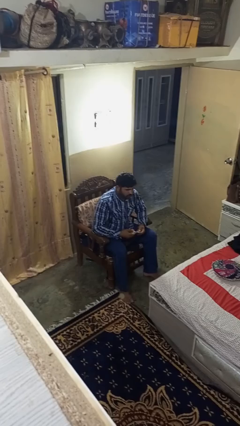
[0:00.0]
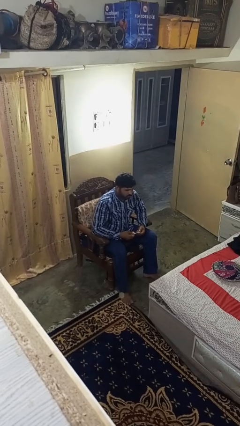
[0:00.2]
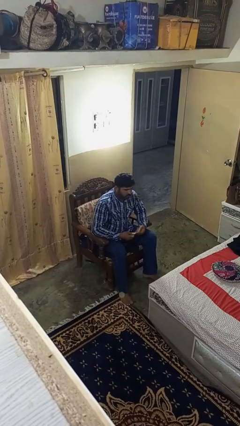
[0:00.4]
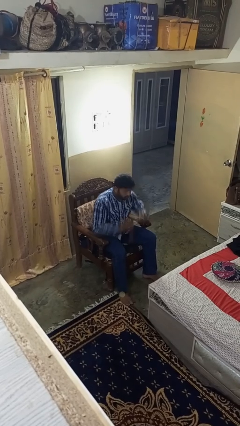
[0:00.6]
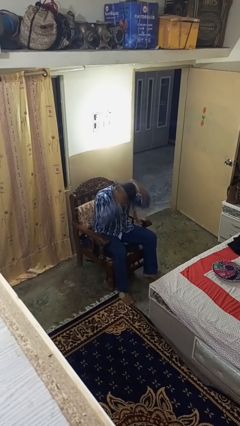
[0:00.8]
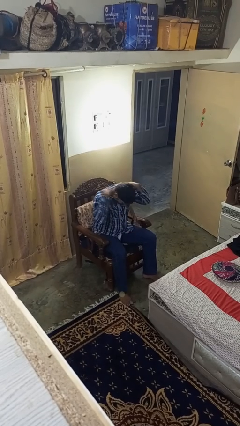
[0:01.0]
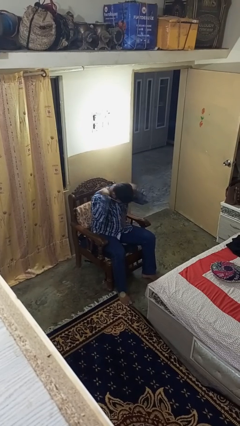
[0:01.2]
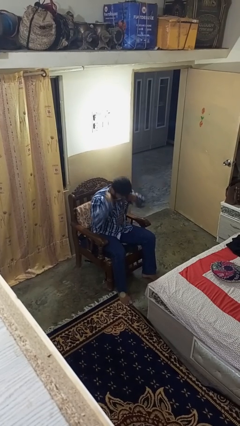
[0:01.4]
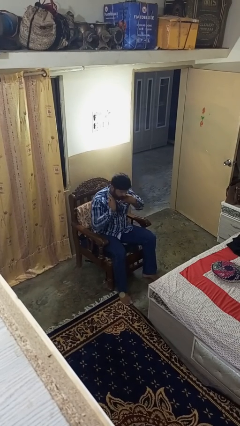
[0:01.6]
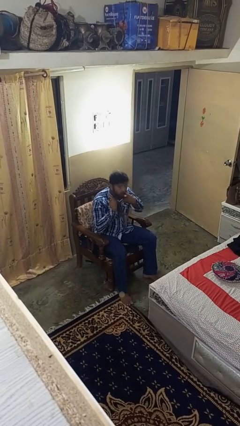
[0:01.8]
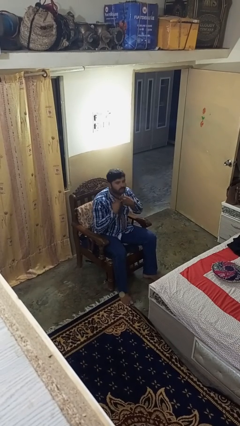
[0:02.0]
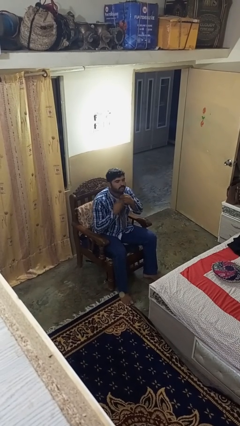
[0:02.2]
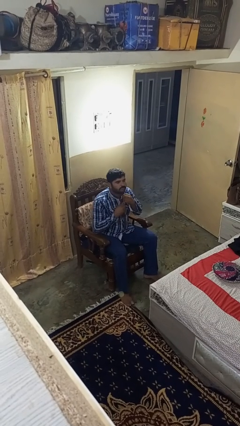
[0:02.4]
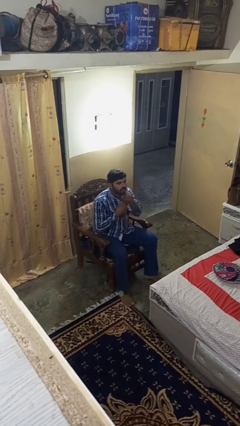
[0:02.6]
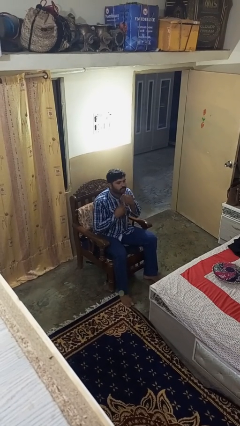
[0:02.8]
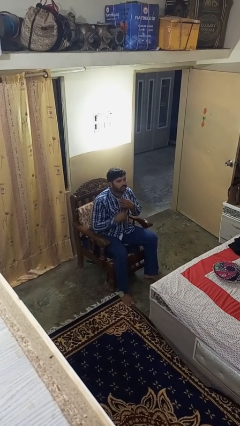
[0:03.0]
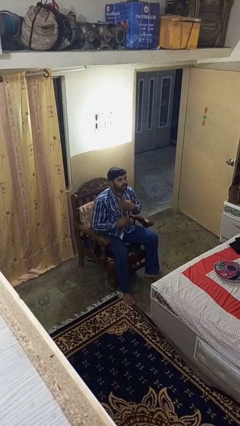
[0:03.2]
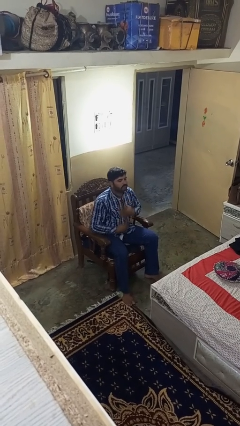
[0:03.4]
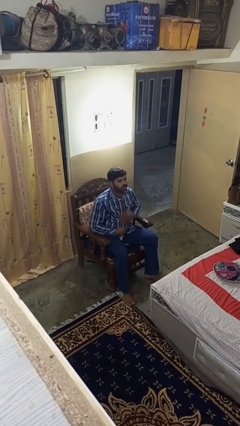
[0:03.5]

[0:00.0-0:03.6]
person puts on necktie

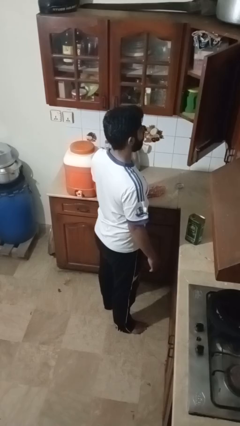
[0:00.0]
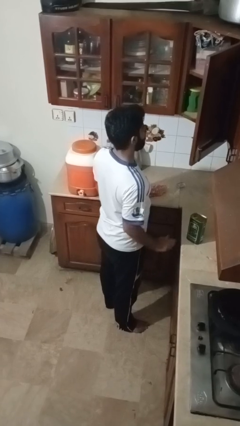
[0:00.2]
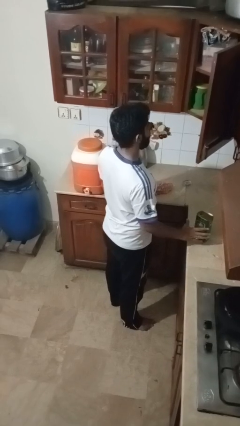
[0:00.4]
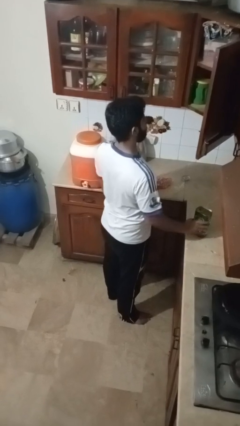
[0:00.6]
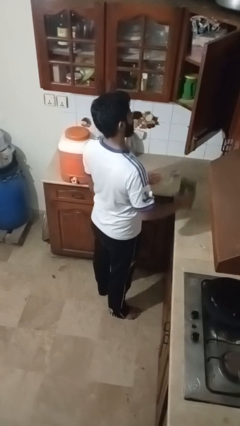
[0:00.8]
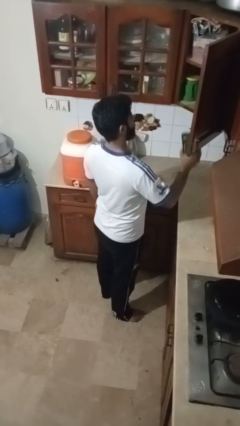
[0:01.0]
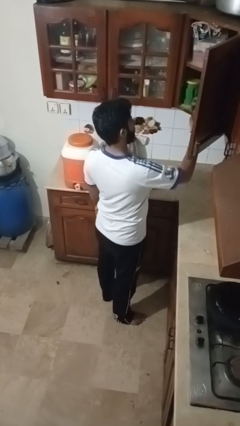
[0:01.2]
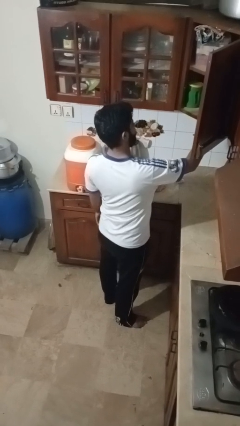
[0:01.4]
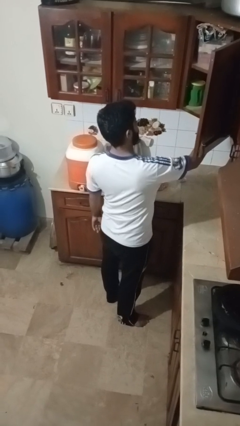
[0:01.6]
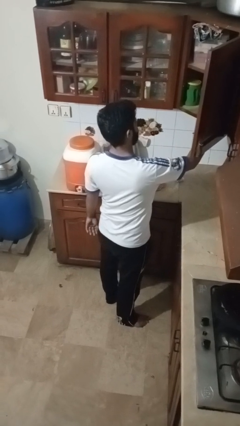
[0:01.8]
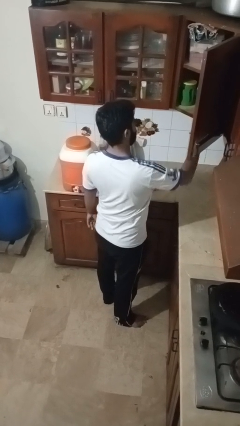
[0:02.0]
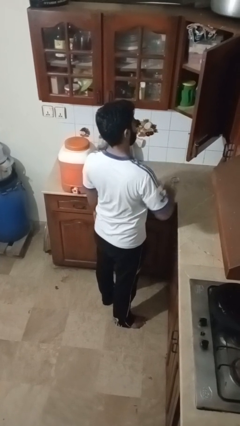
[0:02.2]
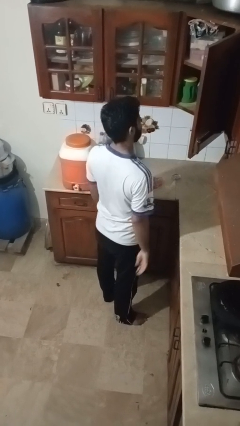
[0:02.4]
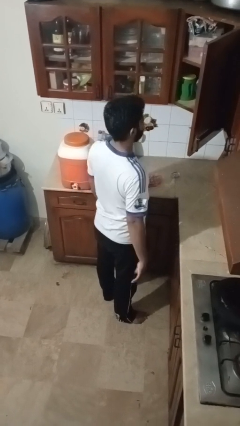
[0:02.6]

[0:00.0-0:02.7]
person puts object in cabinet

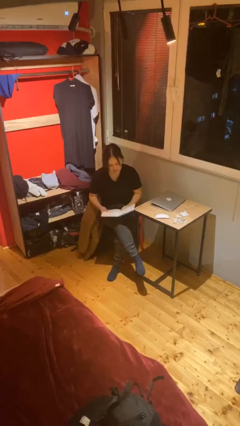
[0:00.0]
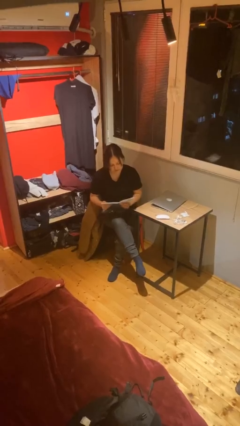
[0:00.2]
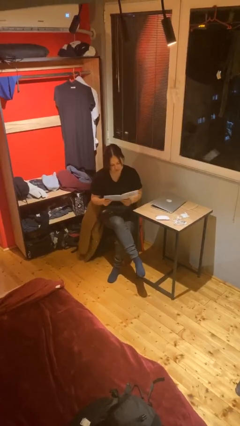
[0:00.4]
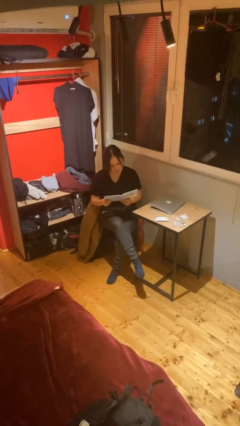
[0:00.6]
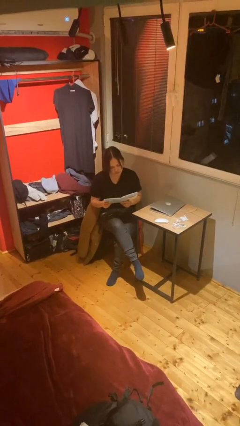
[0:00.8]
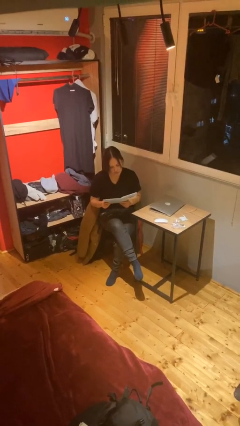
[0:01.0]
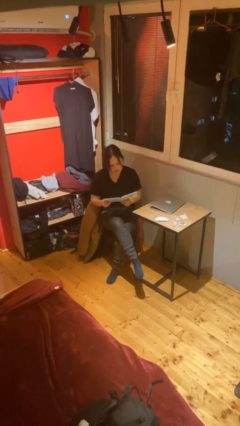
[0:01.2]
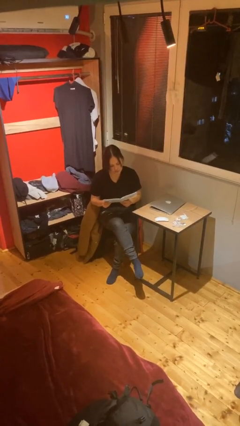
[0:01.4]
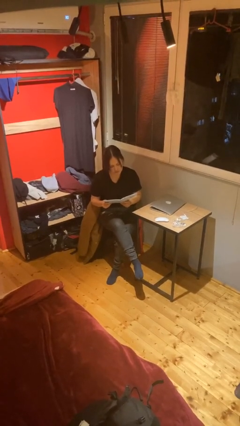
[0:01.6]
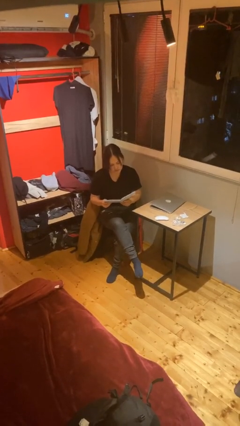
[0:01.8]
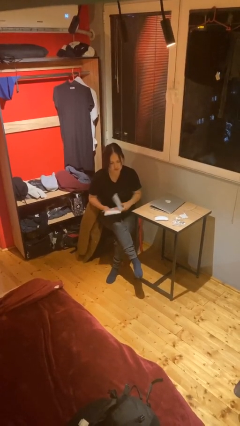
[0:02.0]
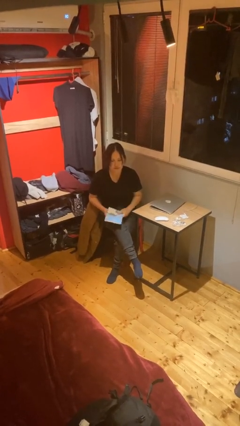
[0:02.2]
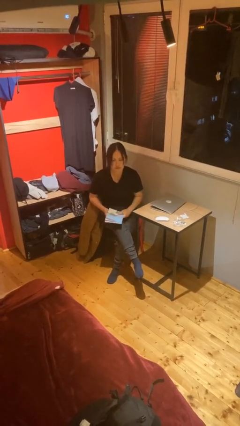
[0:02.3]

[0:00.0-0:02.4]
person reads document

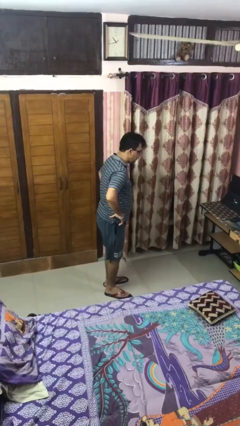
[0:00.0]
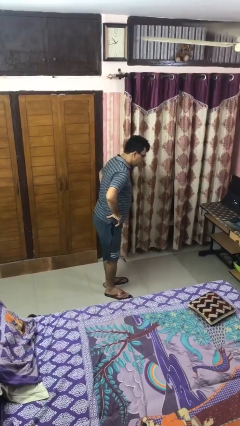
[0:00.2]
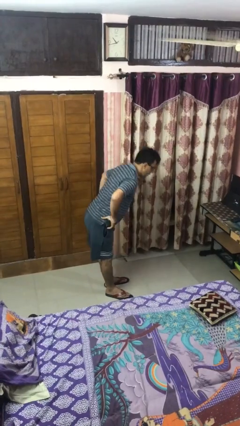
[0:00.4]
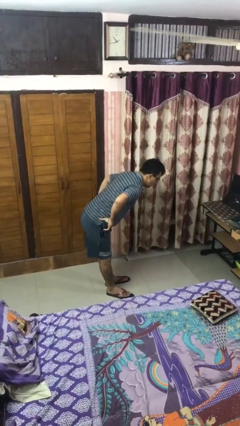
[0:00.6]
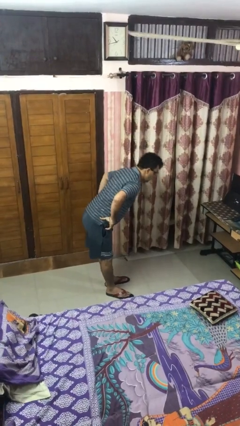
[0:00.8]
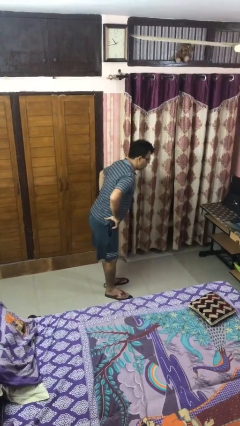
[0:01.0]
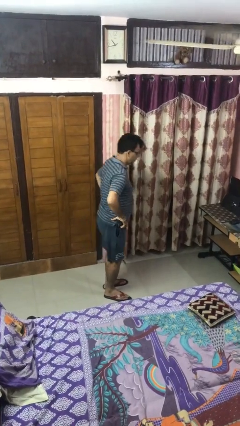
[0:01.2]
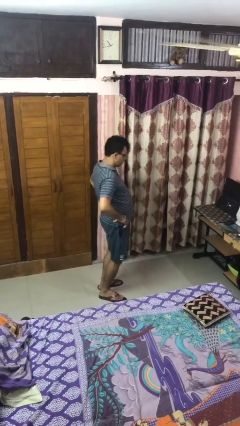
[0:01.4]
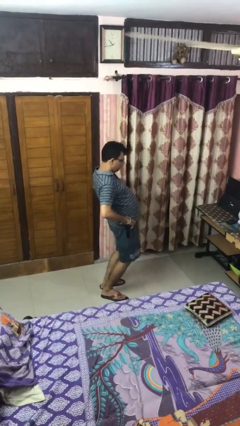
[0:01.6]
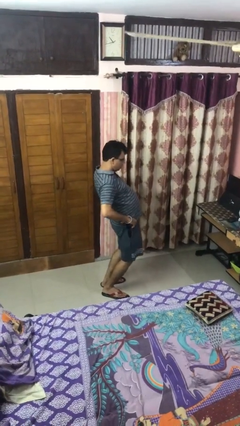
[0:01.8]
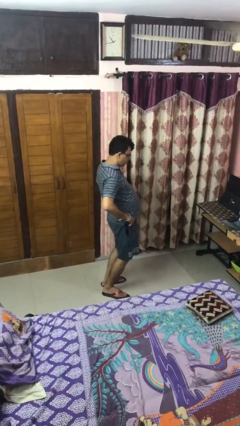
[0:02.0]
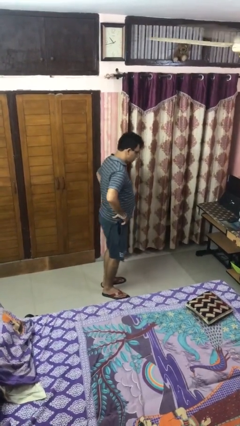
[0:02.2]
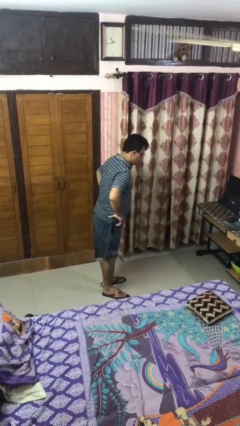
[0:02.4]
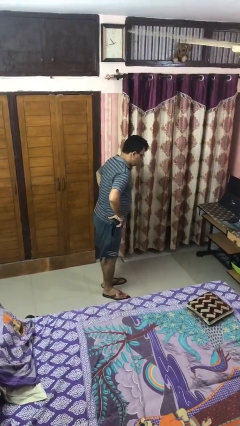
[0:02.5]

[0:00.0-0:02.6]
person wiggles hips

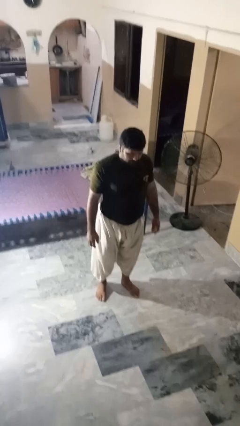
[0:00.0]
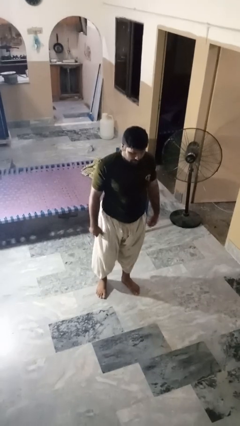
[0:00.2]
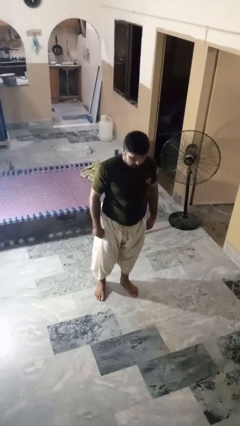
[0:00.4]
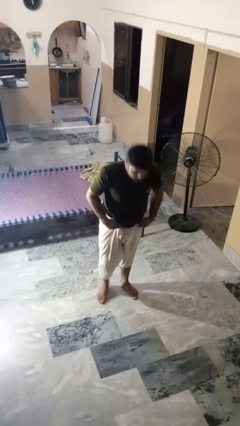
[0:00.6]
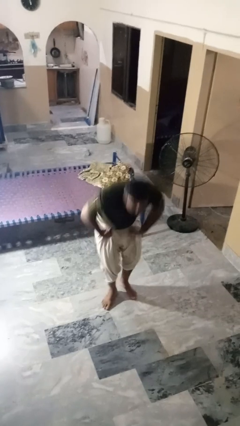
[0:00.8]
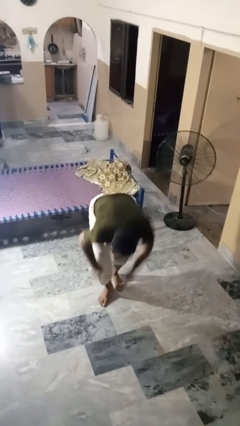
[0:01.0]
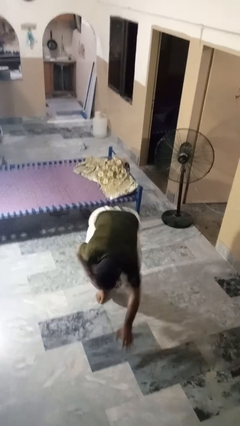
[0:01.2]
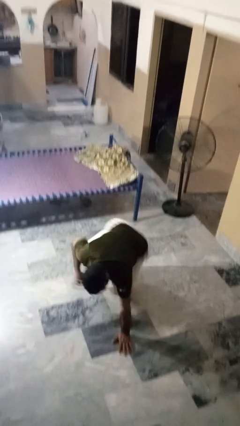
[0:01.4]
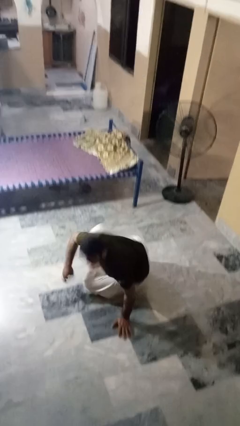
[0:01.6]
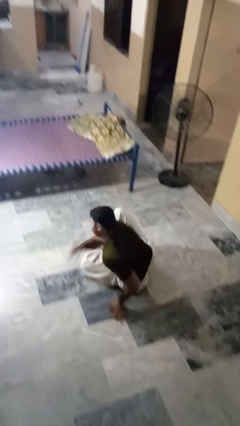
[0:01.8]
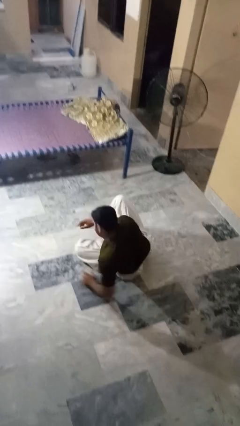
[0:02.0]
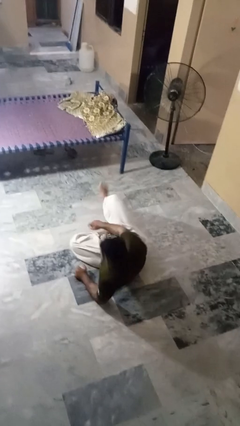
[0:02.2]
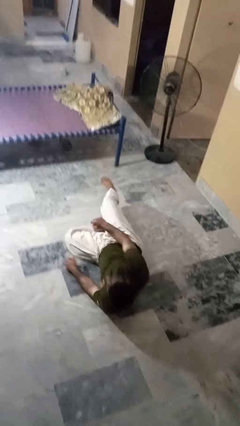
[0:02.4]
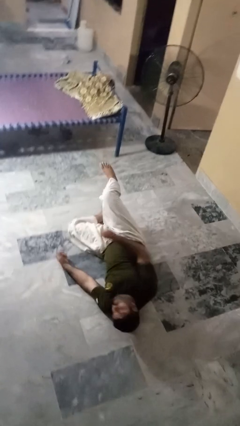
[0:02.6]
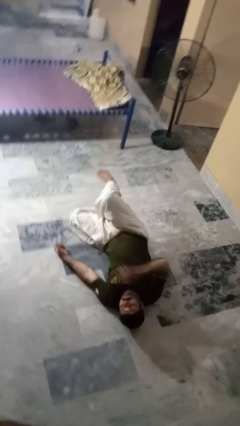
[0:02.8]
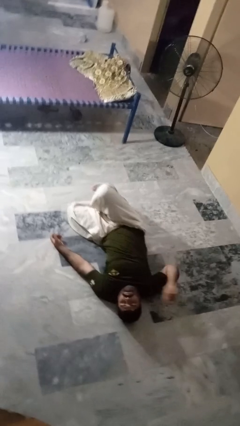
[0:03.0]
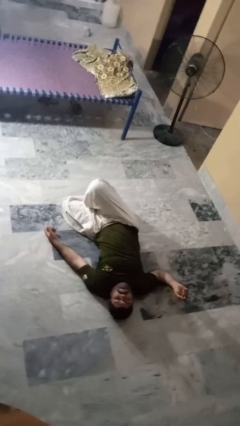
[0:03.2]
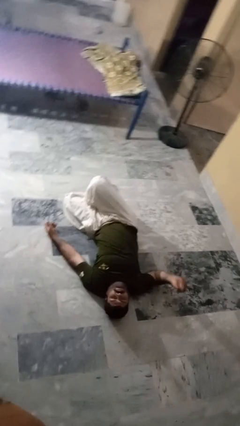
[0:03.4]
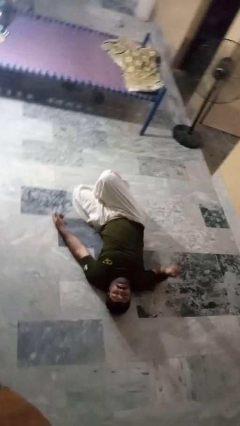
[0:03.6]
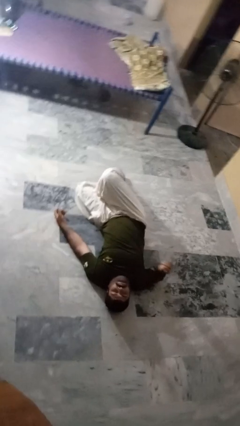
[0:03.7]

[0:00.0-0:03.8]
person falls while standing

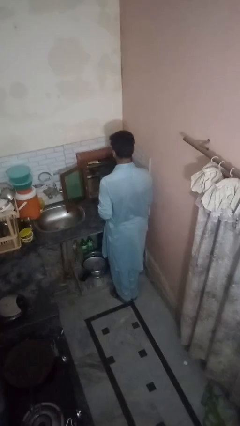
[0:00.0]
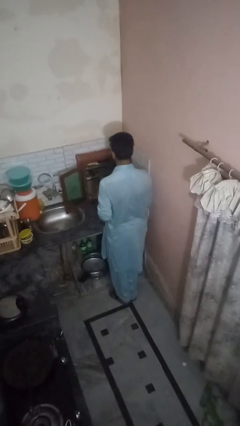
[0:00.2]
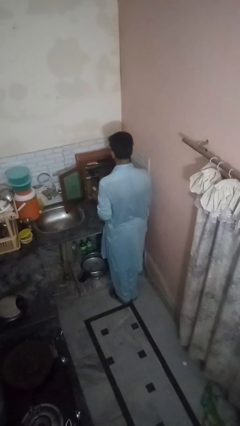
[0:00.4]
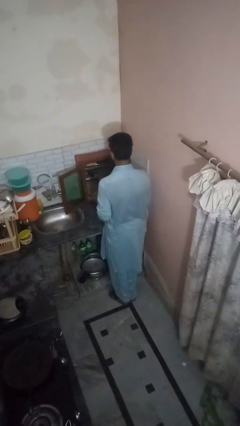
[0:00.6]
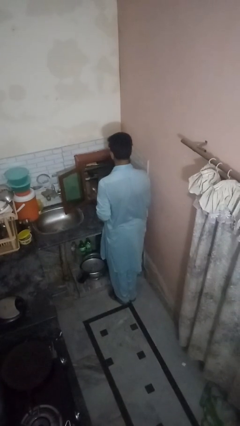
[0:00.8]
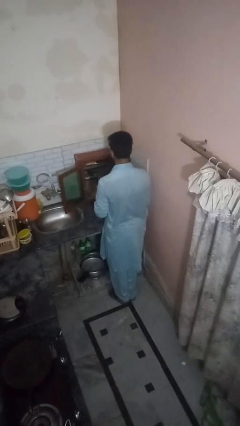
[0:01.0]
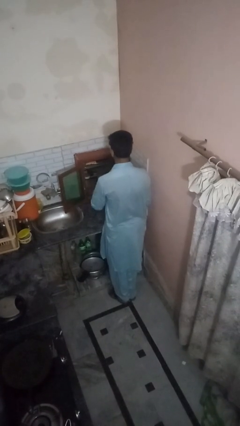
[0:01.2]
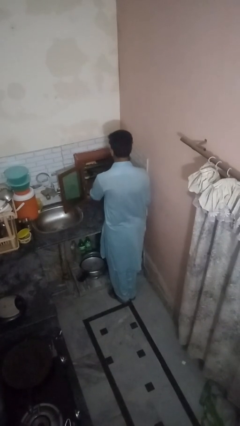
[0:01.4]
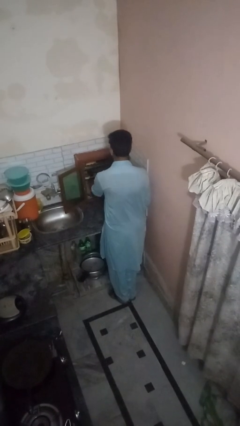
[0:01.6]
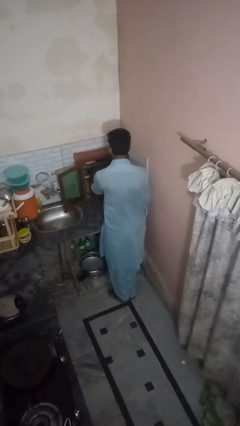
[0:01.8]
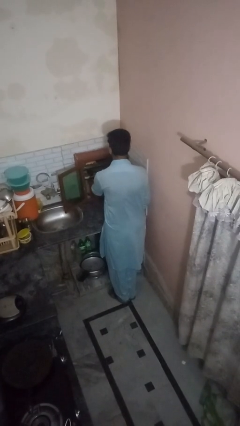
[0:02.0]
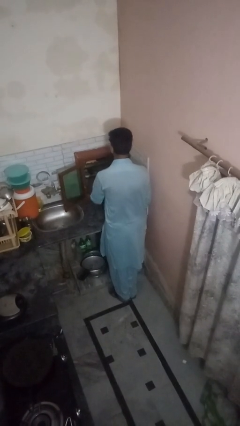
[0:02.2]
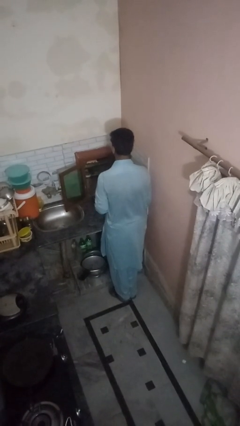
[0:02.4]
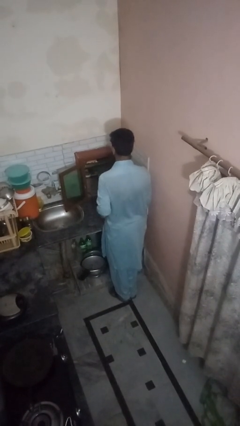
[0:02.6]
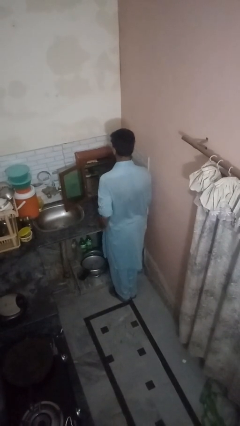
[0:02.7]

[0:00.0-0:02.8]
person puts object into kitchen drawer
